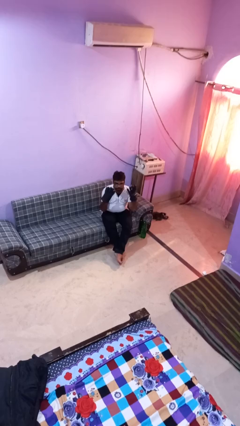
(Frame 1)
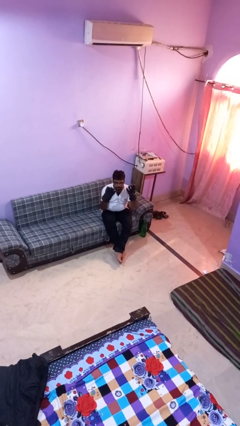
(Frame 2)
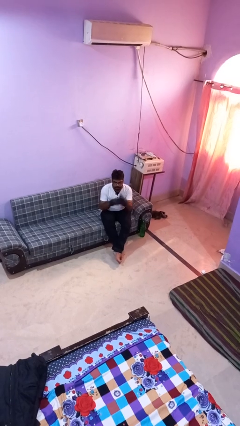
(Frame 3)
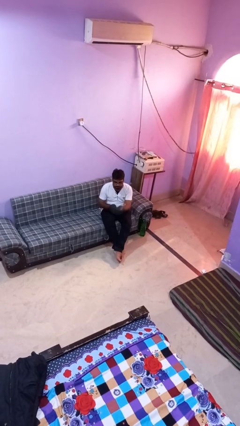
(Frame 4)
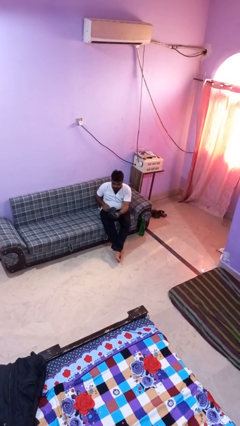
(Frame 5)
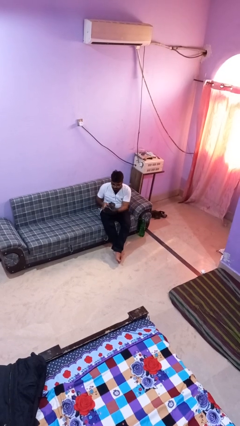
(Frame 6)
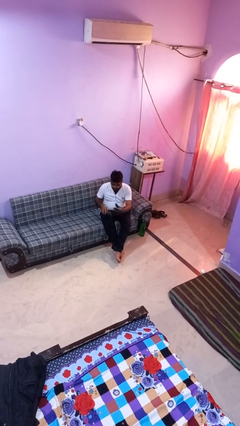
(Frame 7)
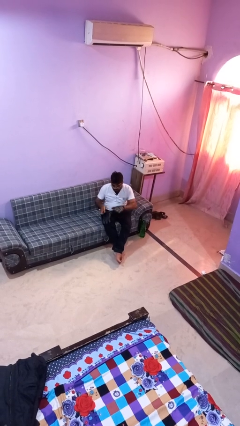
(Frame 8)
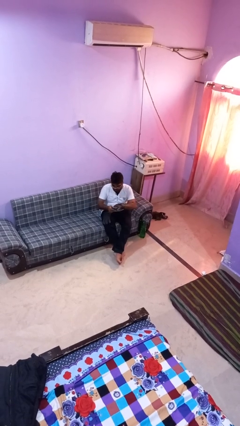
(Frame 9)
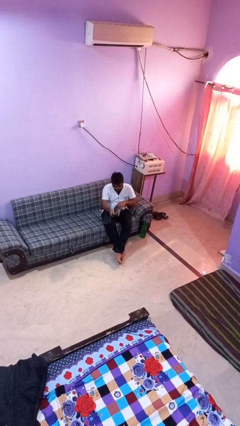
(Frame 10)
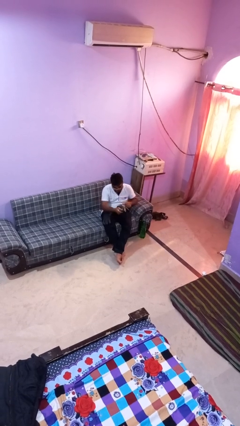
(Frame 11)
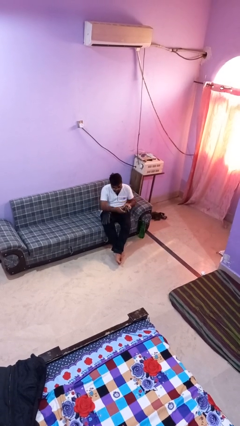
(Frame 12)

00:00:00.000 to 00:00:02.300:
person takes off gloves

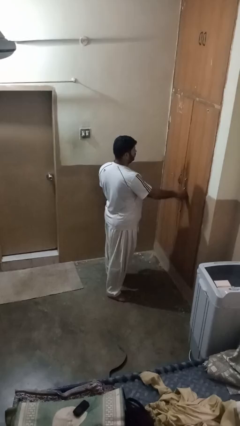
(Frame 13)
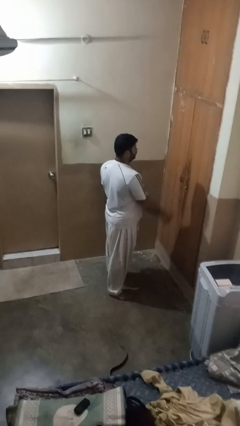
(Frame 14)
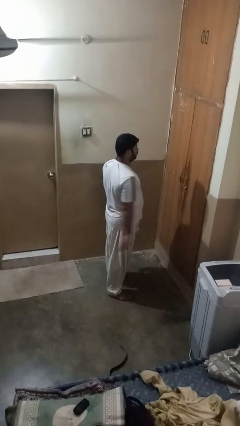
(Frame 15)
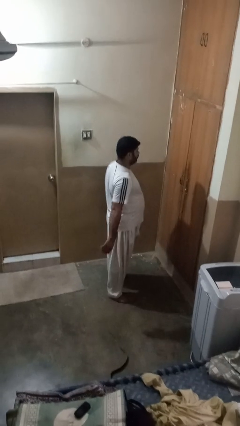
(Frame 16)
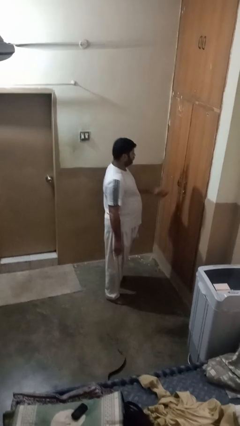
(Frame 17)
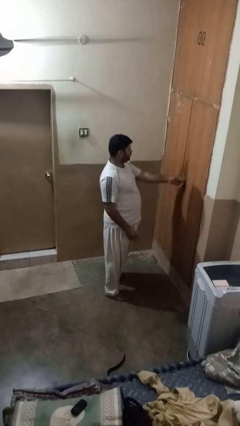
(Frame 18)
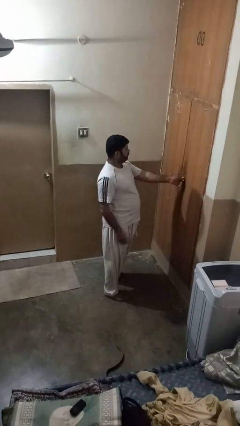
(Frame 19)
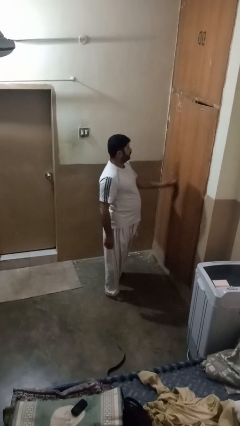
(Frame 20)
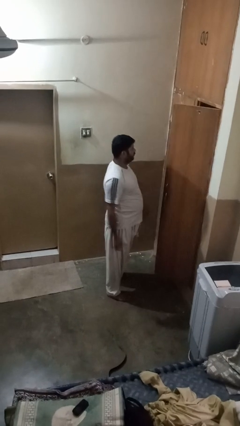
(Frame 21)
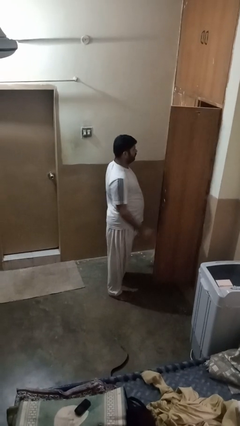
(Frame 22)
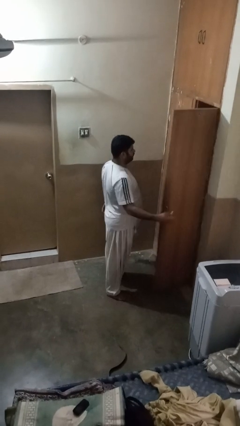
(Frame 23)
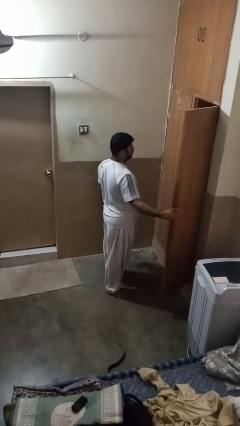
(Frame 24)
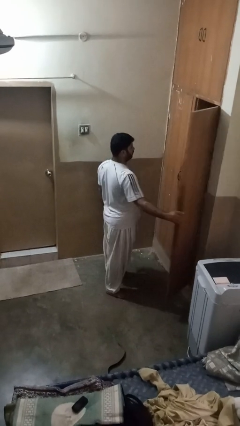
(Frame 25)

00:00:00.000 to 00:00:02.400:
person opens closet door

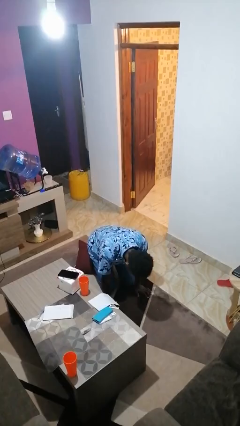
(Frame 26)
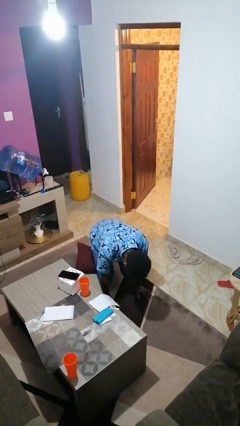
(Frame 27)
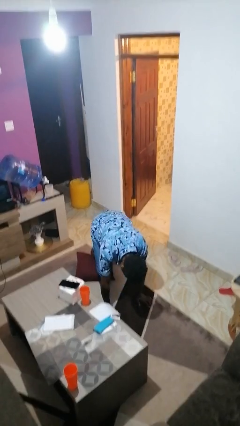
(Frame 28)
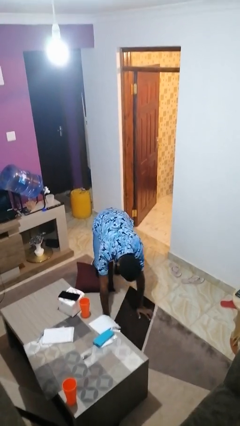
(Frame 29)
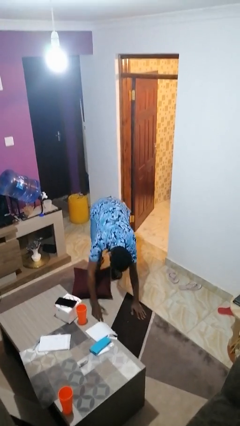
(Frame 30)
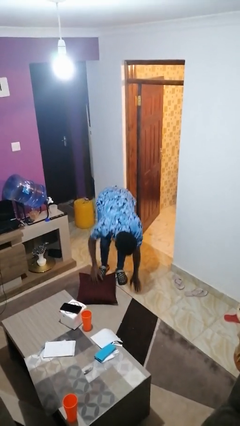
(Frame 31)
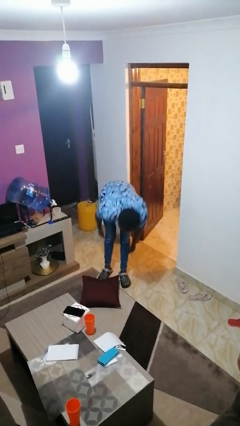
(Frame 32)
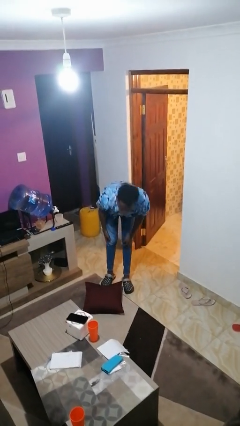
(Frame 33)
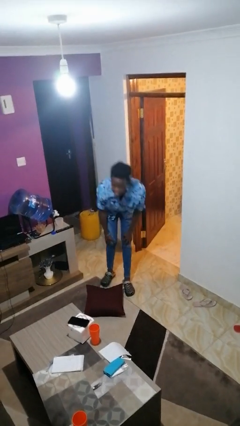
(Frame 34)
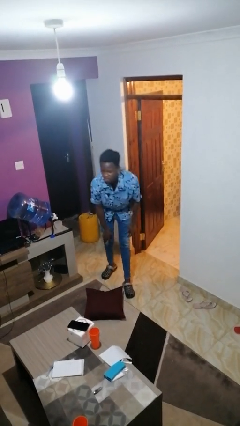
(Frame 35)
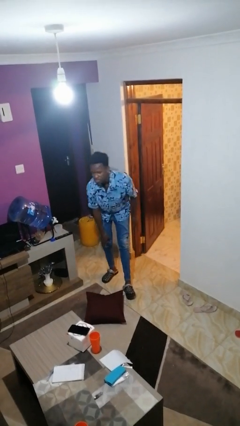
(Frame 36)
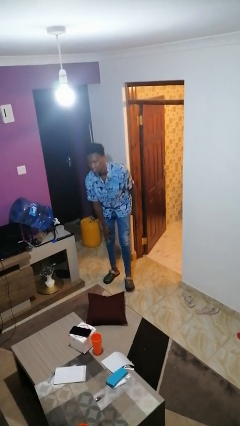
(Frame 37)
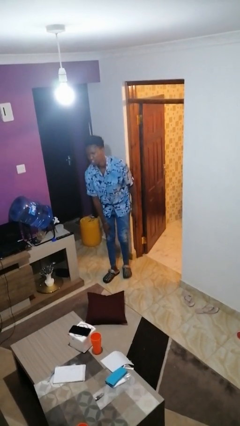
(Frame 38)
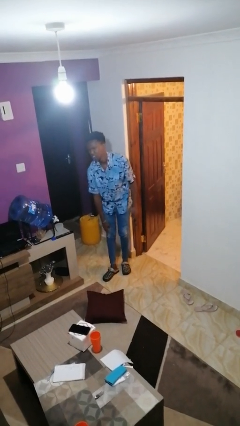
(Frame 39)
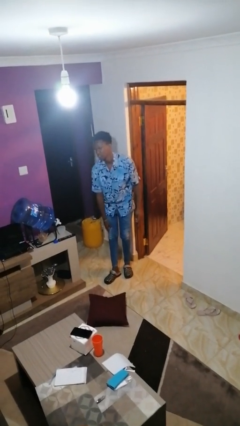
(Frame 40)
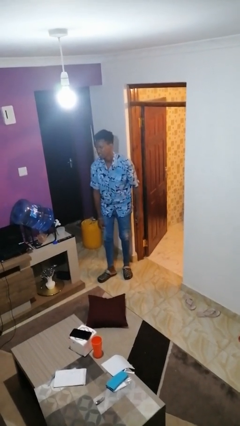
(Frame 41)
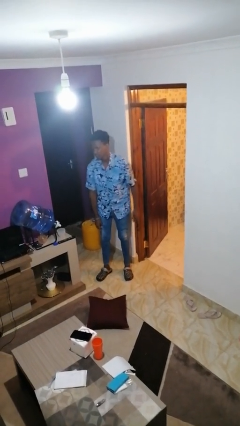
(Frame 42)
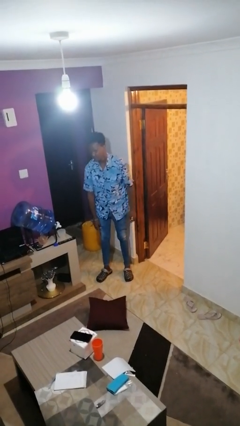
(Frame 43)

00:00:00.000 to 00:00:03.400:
person stands up from floor

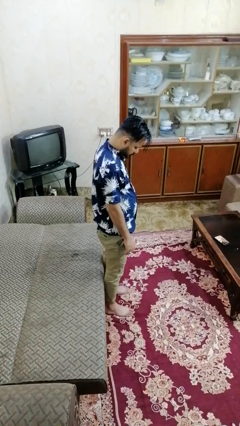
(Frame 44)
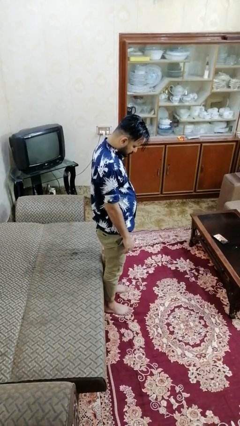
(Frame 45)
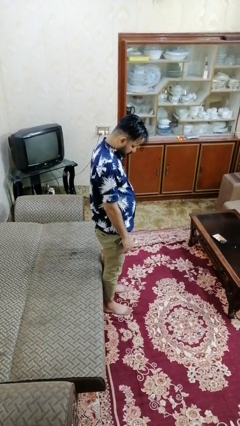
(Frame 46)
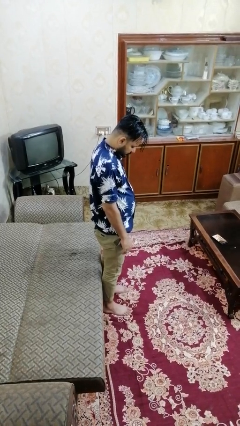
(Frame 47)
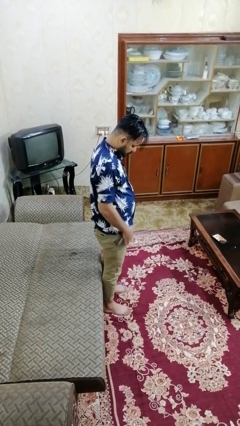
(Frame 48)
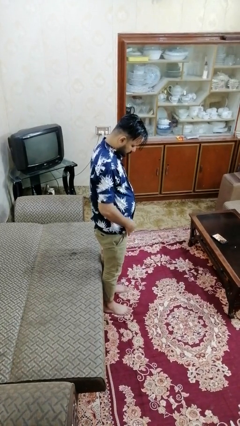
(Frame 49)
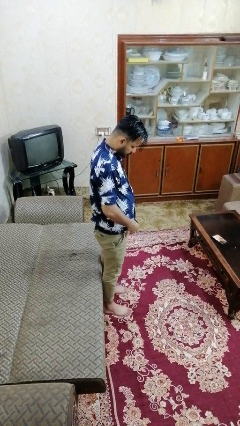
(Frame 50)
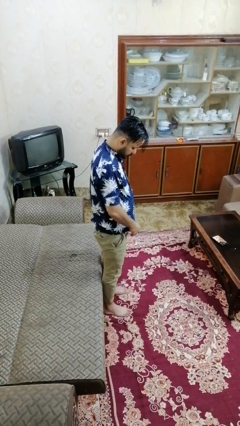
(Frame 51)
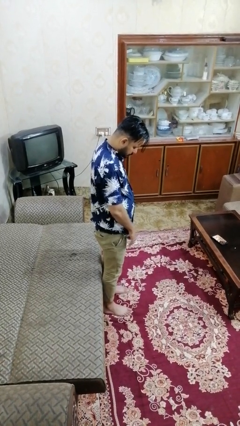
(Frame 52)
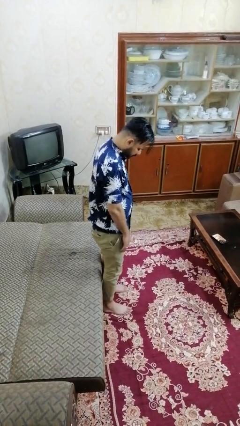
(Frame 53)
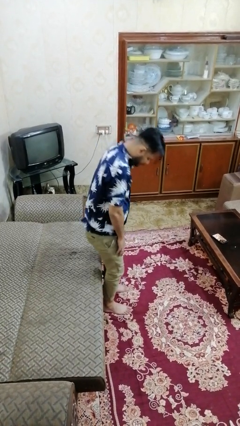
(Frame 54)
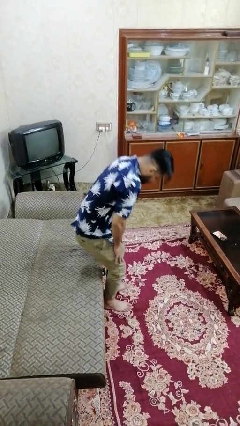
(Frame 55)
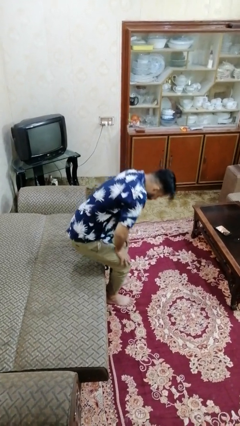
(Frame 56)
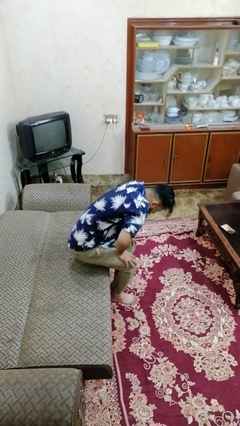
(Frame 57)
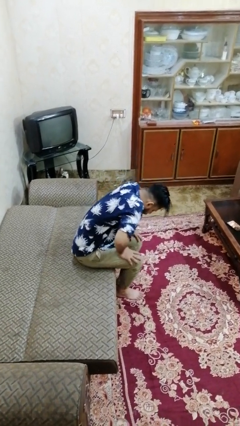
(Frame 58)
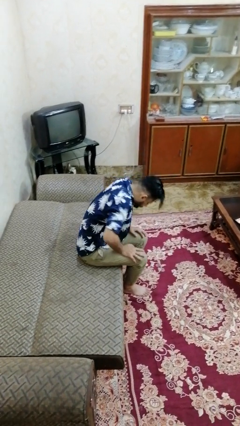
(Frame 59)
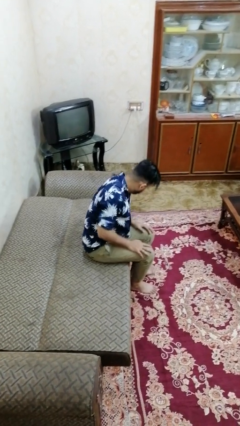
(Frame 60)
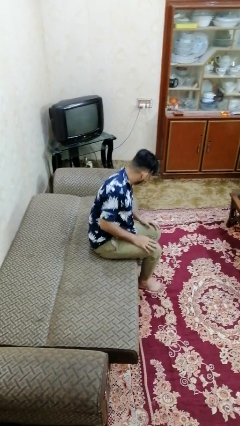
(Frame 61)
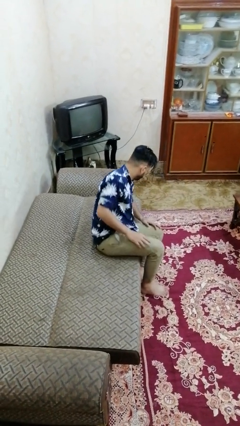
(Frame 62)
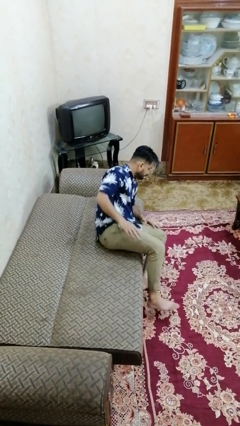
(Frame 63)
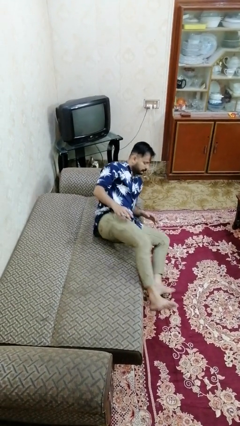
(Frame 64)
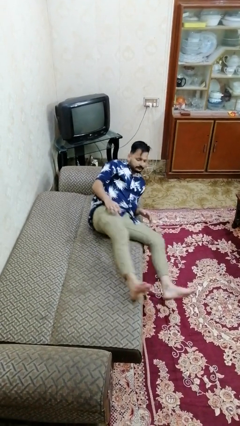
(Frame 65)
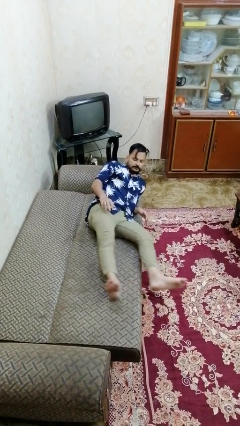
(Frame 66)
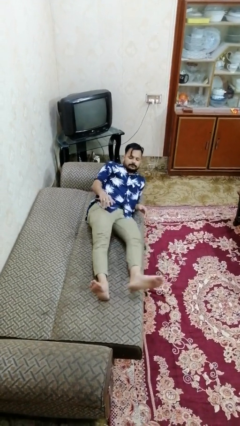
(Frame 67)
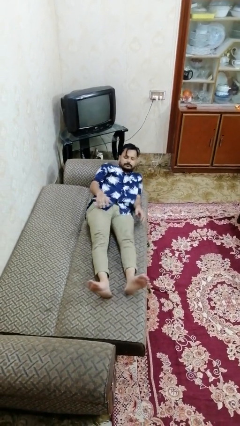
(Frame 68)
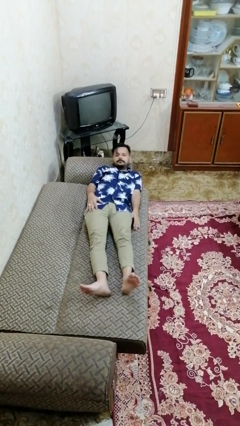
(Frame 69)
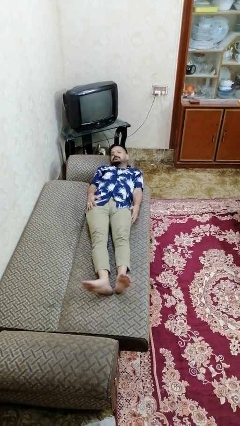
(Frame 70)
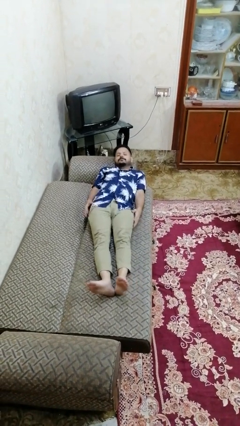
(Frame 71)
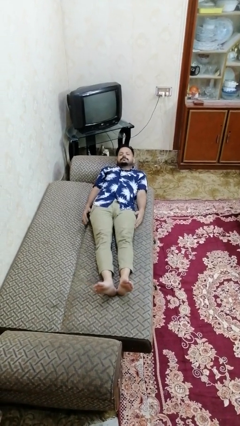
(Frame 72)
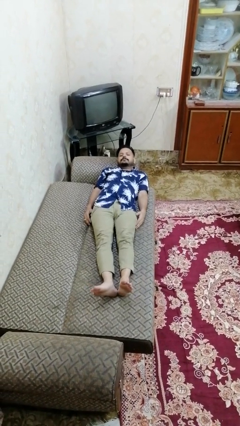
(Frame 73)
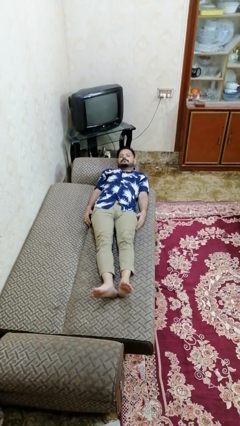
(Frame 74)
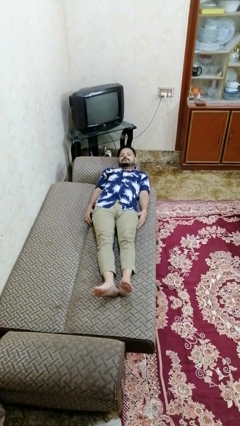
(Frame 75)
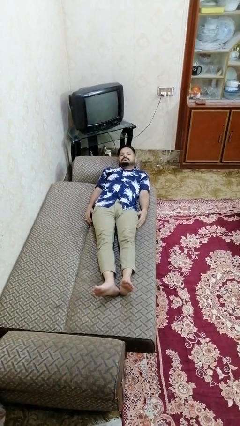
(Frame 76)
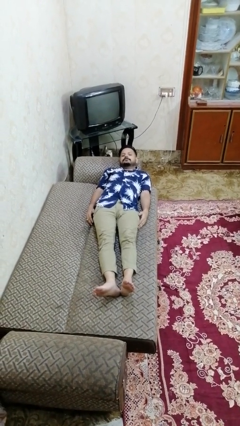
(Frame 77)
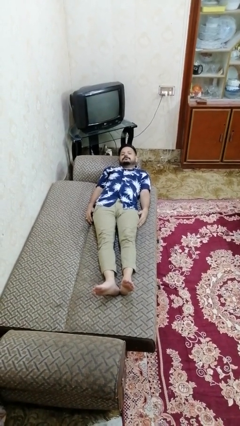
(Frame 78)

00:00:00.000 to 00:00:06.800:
person lies down on bed

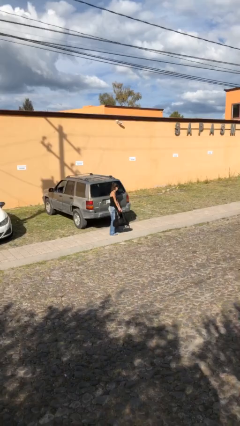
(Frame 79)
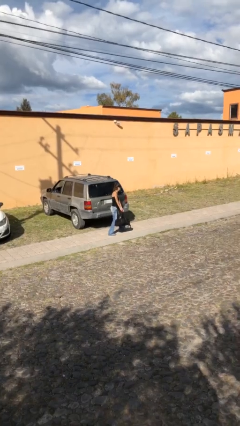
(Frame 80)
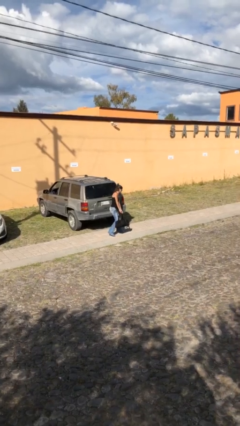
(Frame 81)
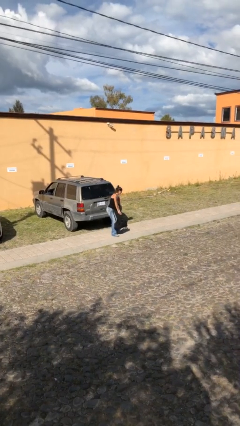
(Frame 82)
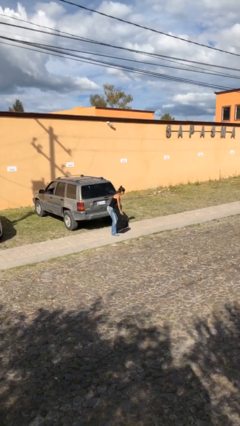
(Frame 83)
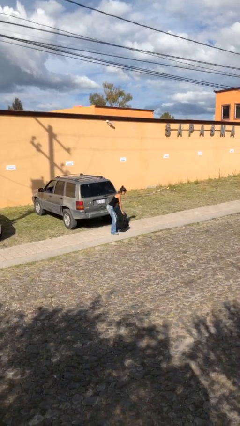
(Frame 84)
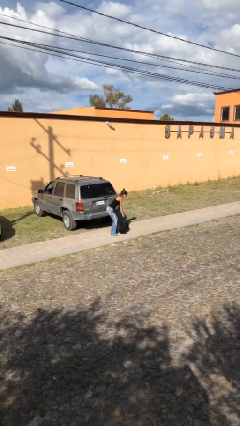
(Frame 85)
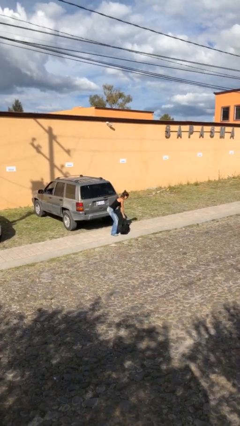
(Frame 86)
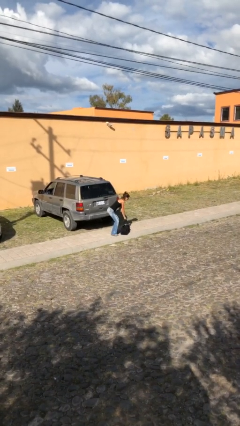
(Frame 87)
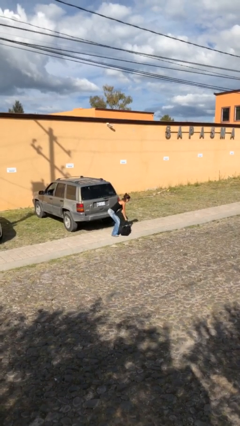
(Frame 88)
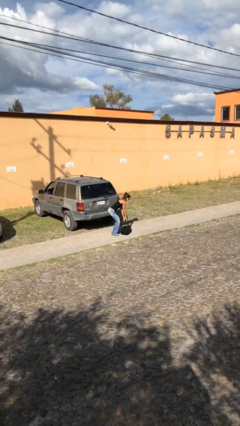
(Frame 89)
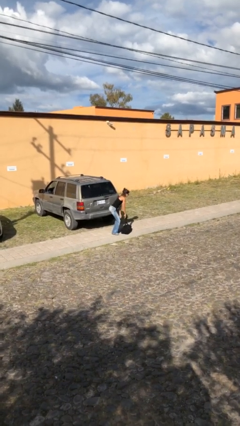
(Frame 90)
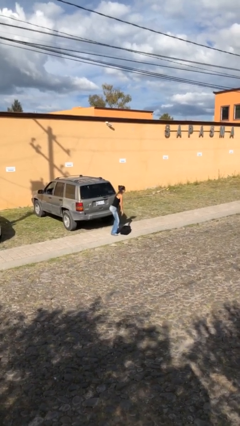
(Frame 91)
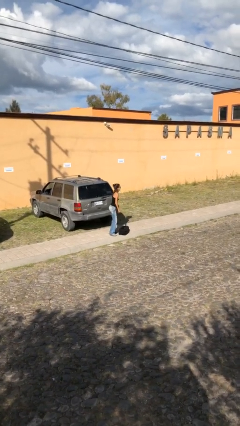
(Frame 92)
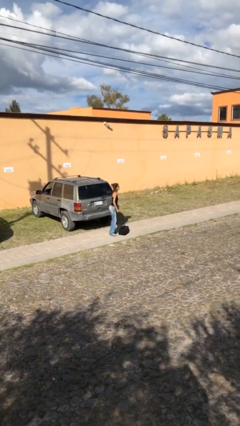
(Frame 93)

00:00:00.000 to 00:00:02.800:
person puts down object on floor
